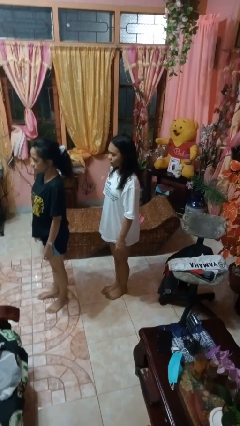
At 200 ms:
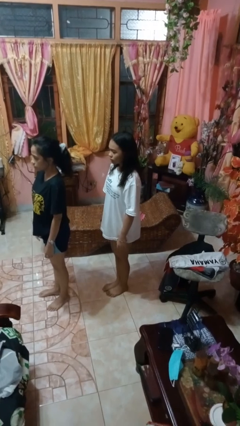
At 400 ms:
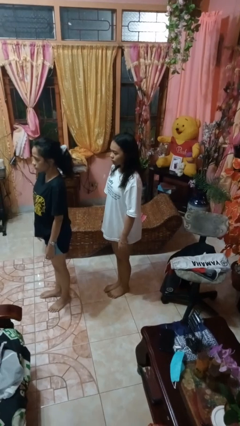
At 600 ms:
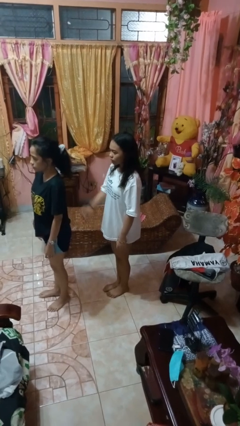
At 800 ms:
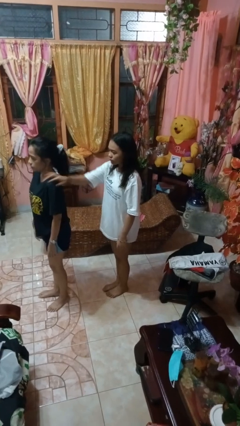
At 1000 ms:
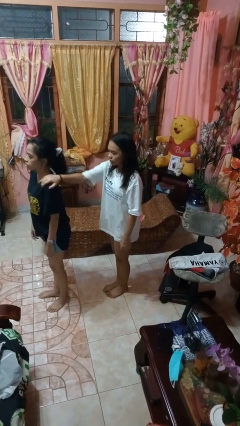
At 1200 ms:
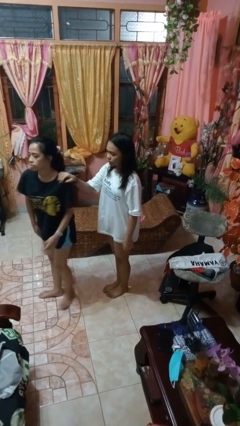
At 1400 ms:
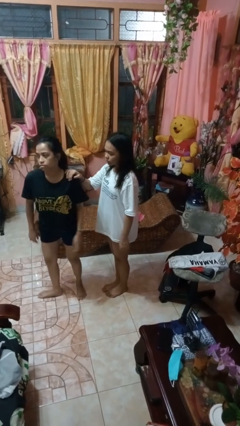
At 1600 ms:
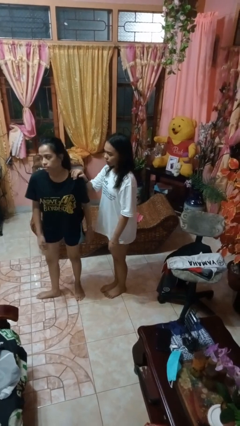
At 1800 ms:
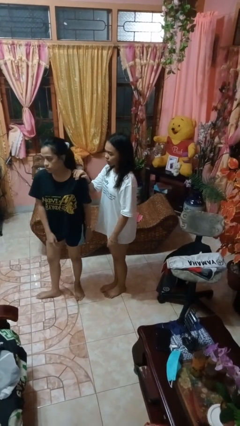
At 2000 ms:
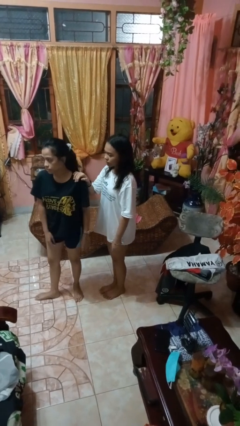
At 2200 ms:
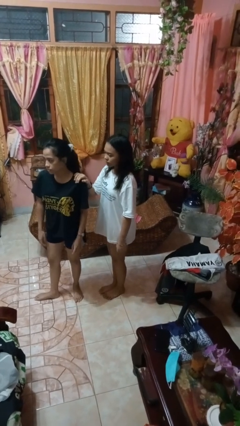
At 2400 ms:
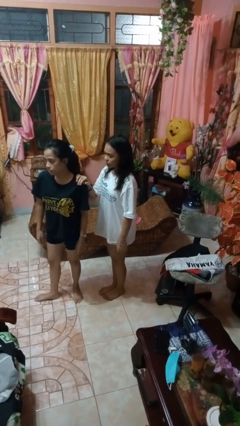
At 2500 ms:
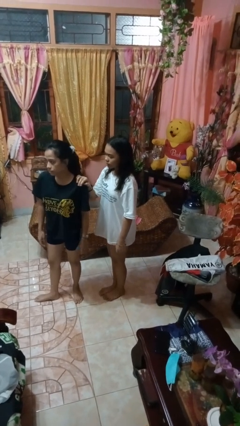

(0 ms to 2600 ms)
person grabs person by shoulder

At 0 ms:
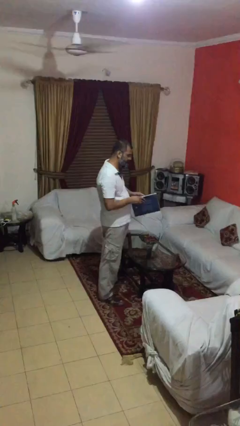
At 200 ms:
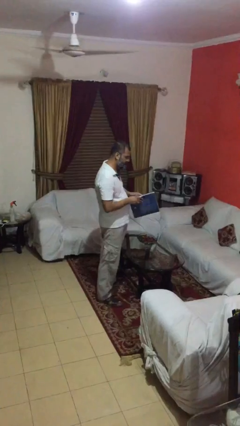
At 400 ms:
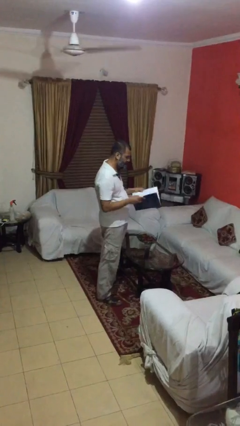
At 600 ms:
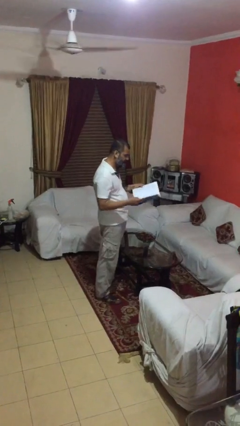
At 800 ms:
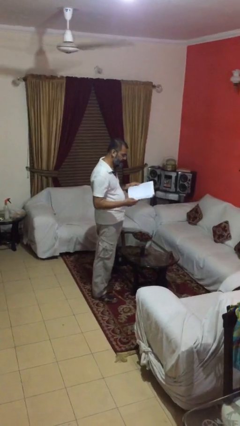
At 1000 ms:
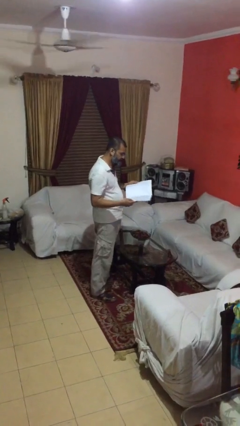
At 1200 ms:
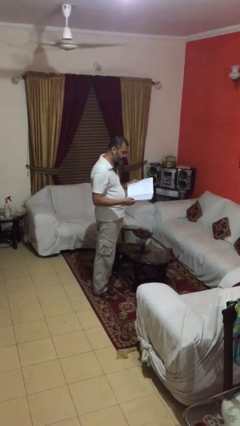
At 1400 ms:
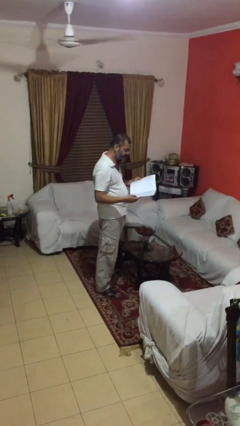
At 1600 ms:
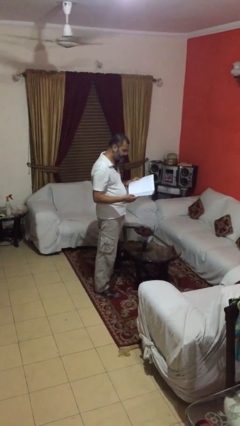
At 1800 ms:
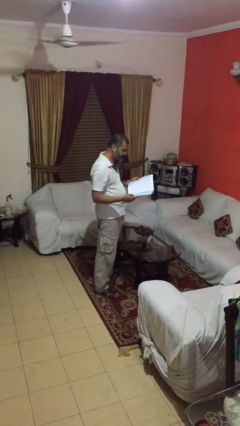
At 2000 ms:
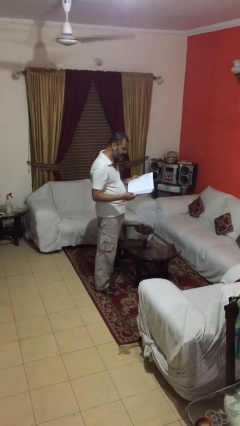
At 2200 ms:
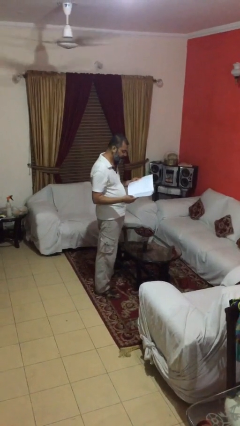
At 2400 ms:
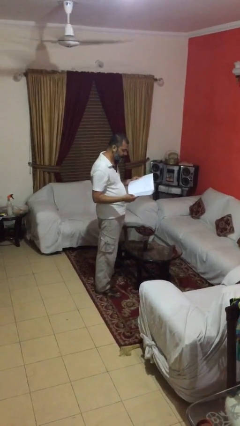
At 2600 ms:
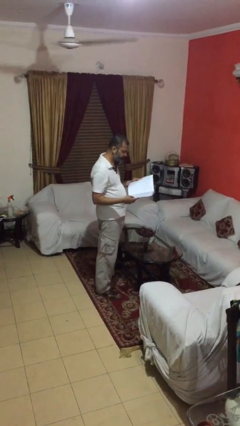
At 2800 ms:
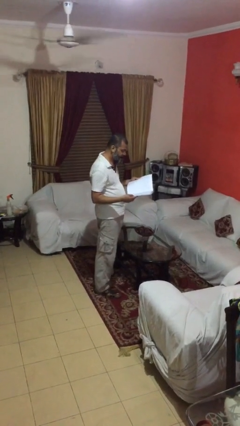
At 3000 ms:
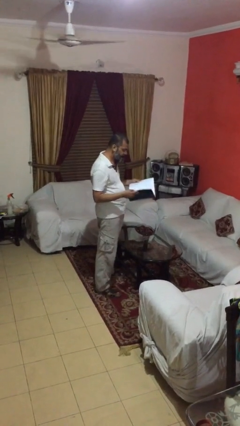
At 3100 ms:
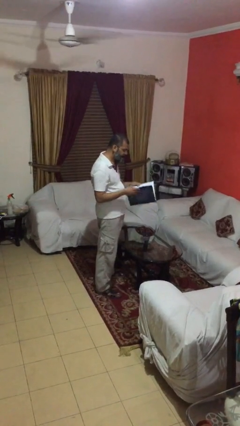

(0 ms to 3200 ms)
person reads document

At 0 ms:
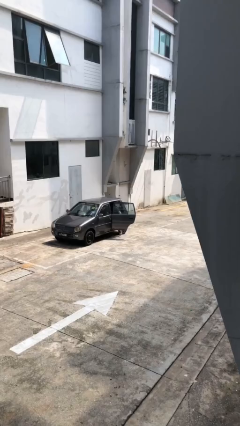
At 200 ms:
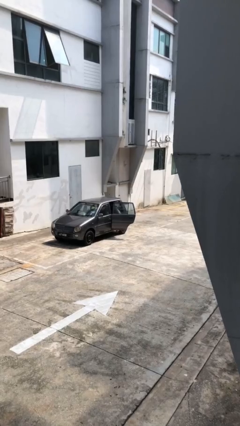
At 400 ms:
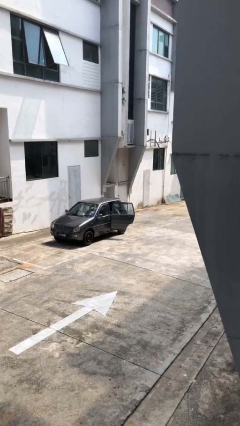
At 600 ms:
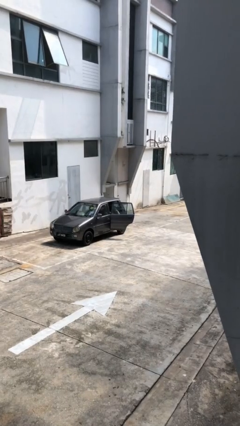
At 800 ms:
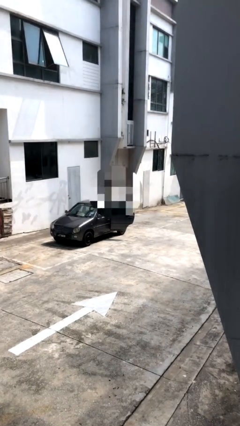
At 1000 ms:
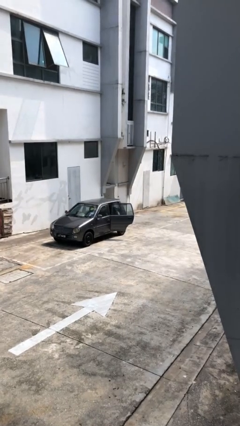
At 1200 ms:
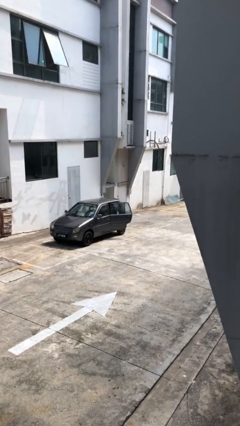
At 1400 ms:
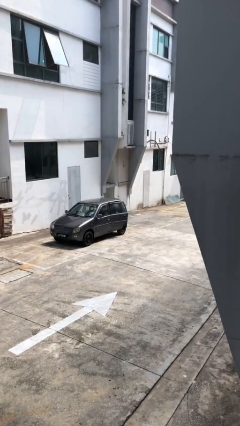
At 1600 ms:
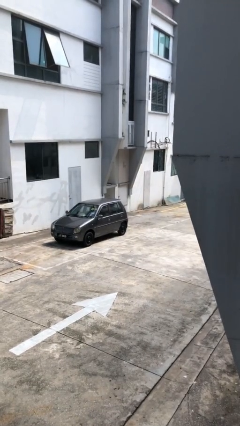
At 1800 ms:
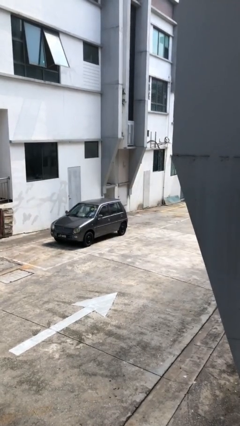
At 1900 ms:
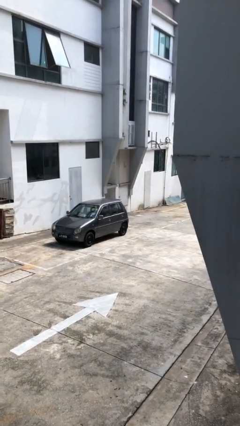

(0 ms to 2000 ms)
person closes car door

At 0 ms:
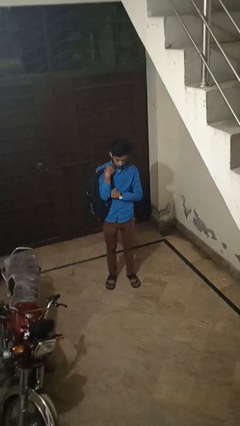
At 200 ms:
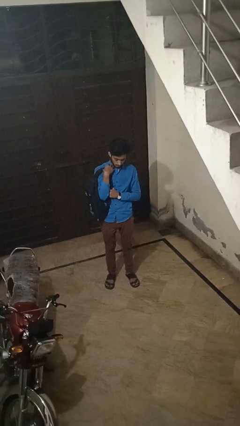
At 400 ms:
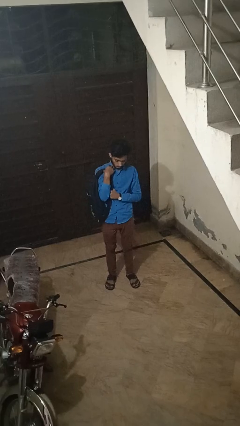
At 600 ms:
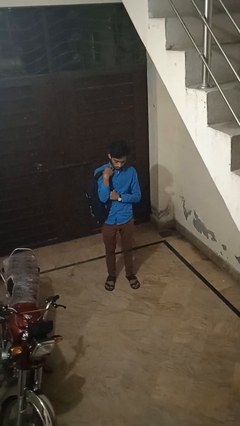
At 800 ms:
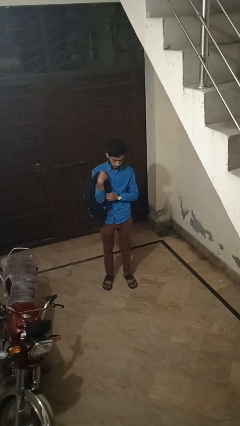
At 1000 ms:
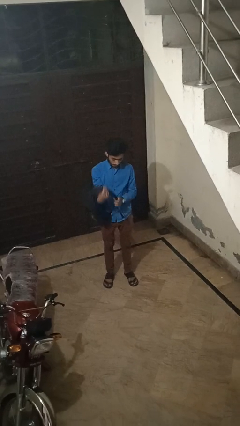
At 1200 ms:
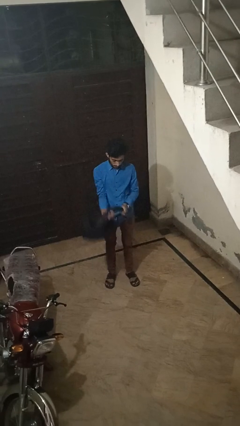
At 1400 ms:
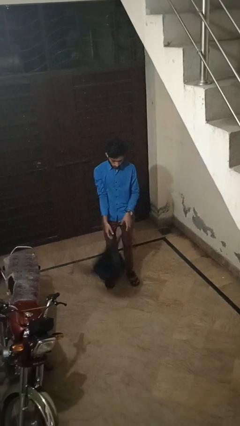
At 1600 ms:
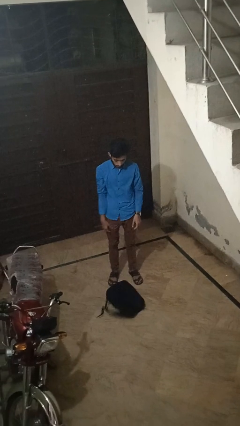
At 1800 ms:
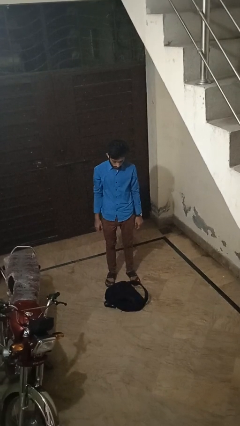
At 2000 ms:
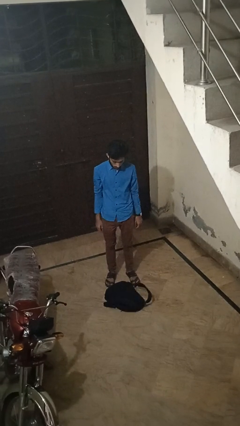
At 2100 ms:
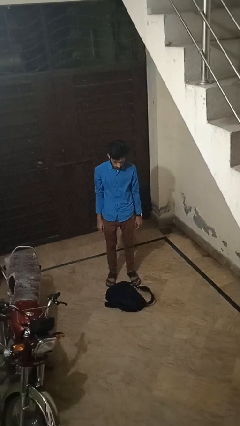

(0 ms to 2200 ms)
person drops object

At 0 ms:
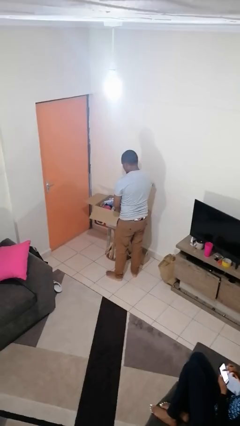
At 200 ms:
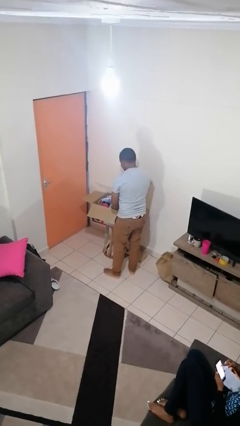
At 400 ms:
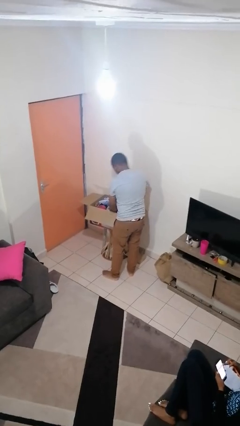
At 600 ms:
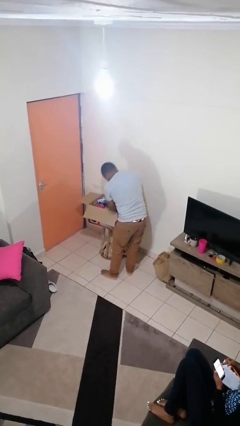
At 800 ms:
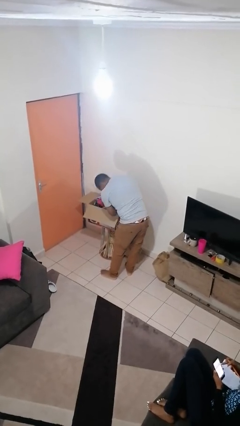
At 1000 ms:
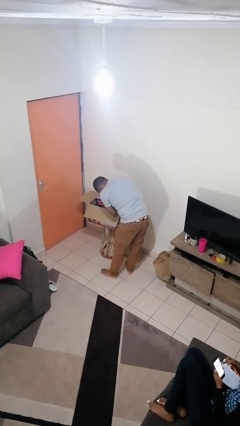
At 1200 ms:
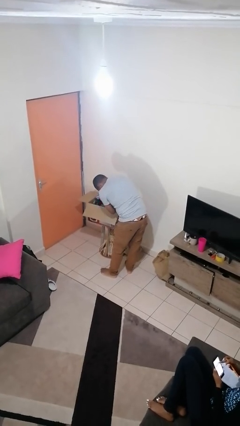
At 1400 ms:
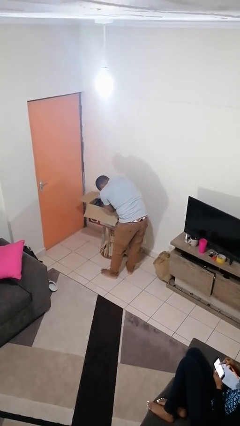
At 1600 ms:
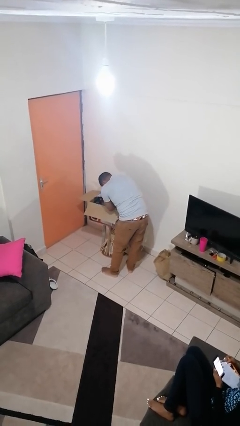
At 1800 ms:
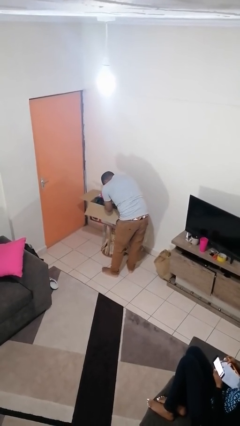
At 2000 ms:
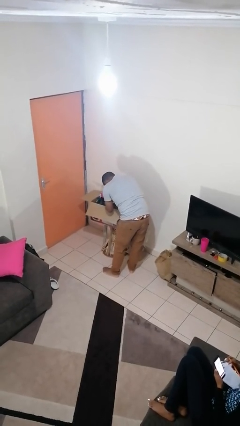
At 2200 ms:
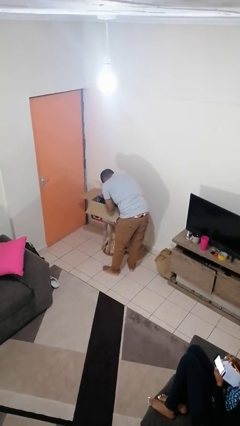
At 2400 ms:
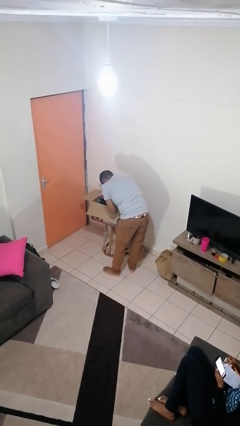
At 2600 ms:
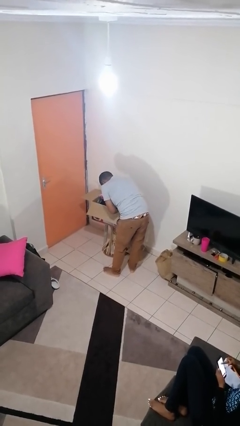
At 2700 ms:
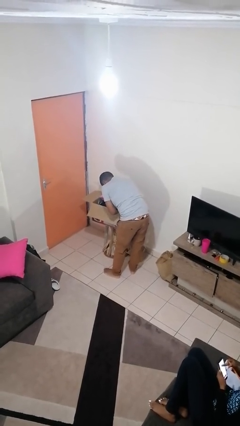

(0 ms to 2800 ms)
person searches in box

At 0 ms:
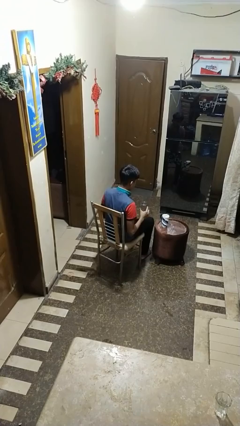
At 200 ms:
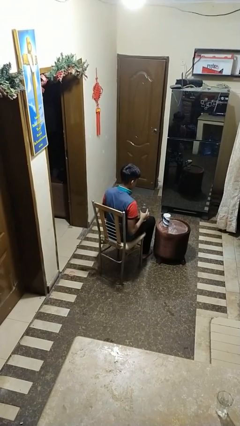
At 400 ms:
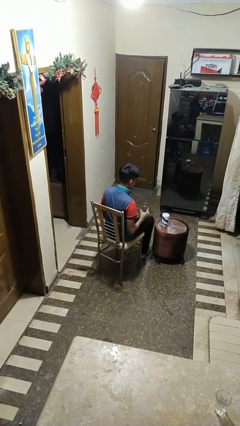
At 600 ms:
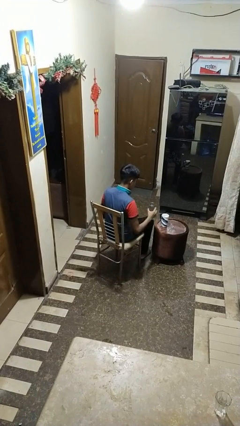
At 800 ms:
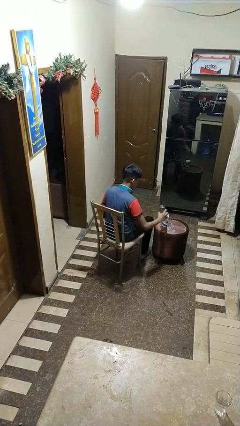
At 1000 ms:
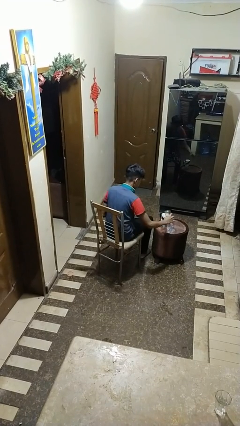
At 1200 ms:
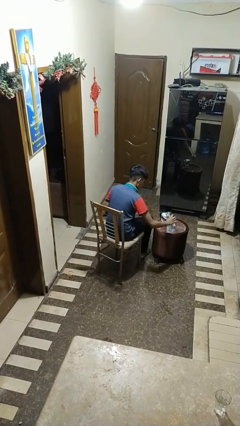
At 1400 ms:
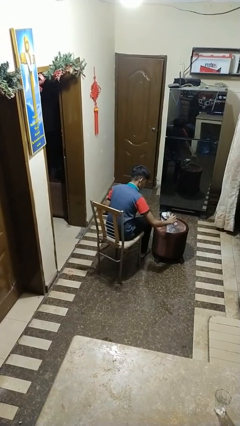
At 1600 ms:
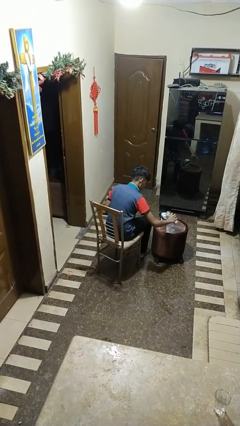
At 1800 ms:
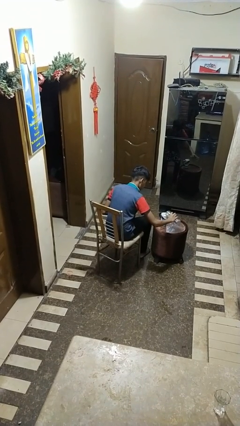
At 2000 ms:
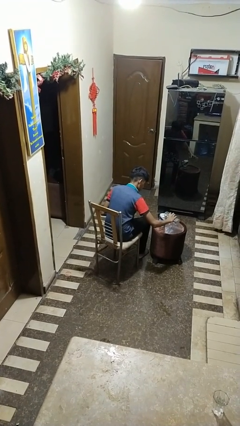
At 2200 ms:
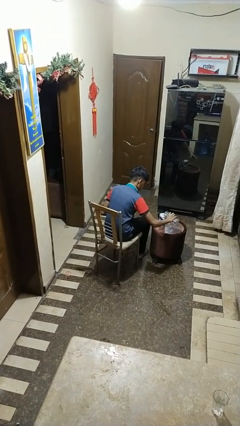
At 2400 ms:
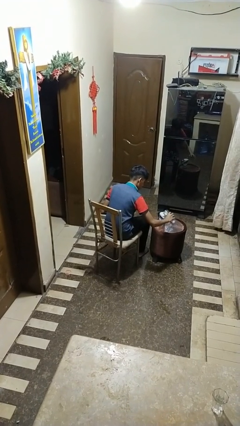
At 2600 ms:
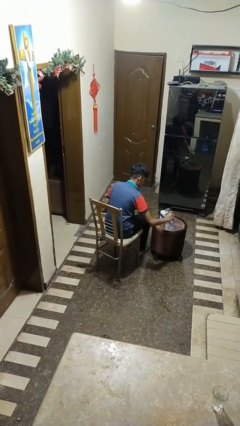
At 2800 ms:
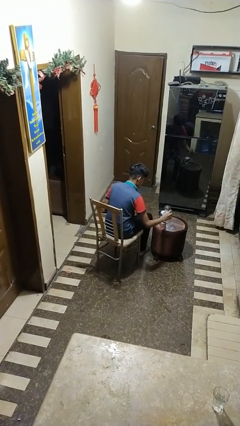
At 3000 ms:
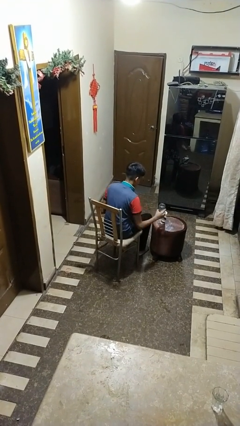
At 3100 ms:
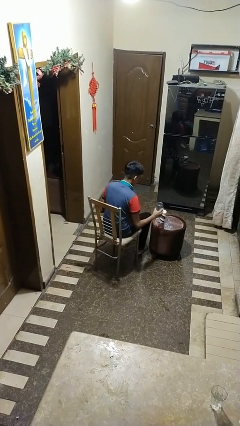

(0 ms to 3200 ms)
person pours liquid into cup

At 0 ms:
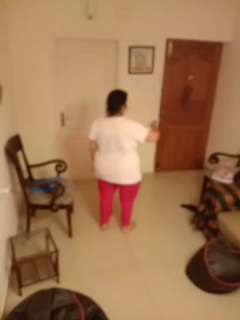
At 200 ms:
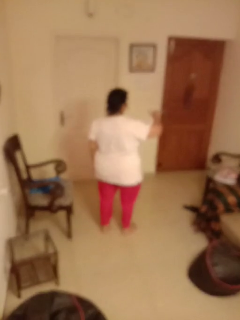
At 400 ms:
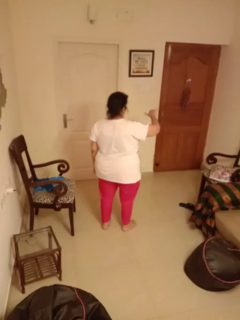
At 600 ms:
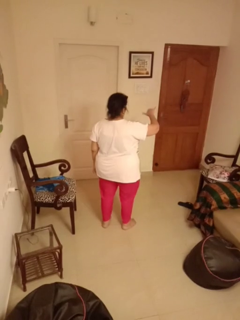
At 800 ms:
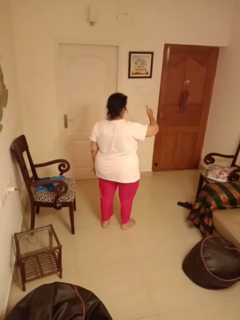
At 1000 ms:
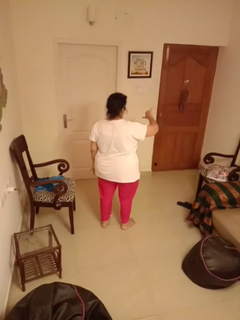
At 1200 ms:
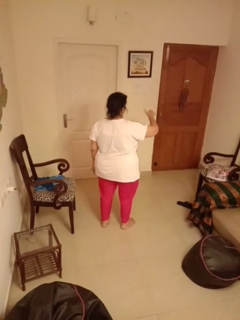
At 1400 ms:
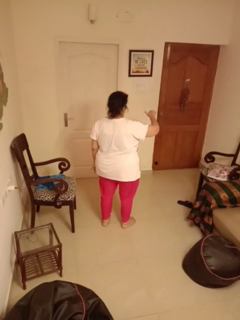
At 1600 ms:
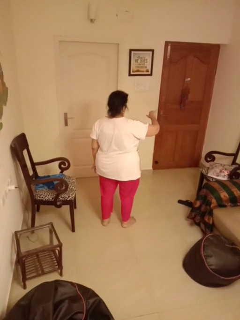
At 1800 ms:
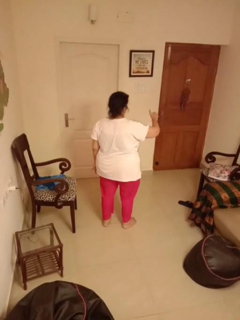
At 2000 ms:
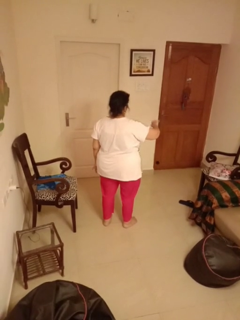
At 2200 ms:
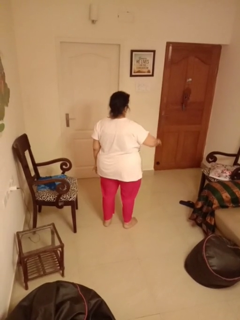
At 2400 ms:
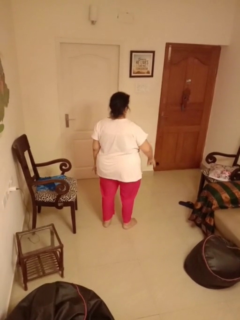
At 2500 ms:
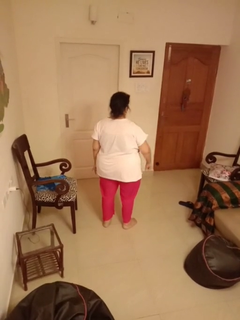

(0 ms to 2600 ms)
person gestures hang loose
